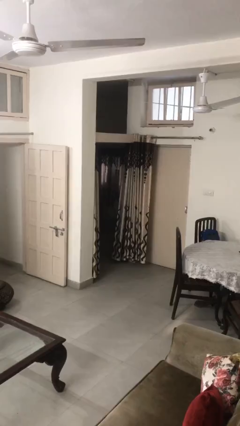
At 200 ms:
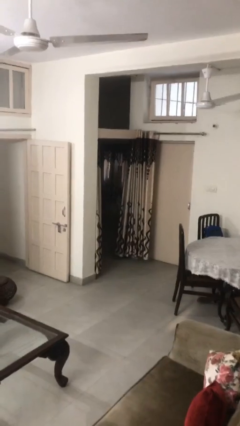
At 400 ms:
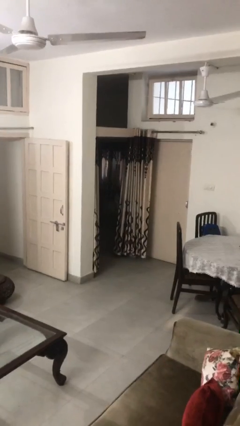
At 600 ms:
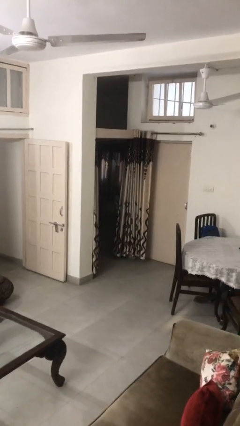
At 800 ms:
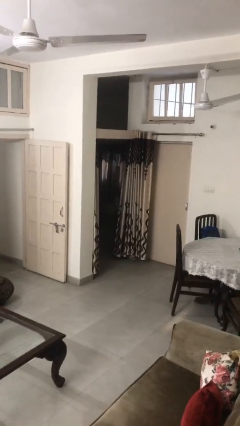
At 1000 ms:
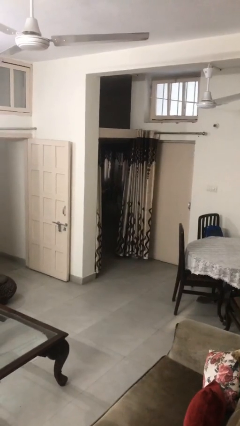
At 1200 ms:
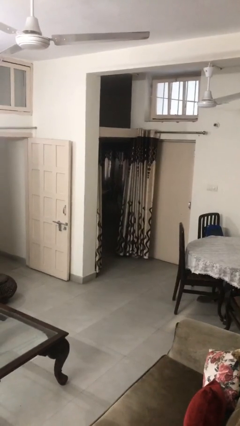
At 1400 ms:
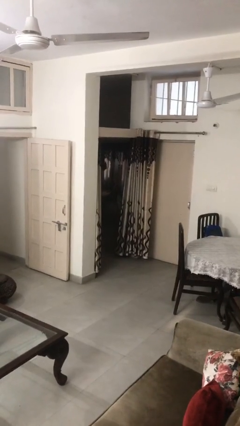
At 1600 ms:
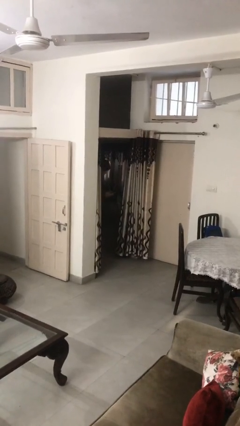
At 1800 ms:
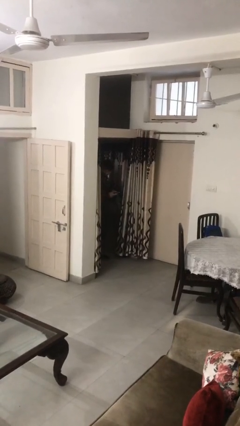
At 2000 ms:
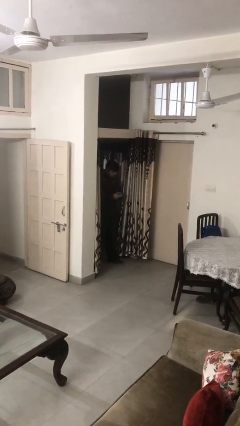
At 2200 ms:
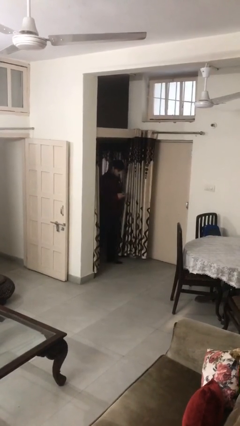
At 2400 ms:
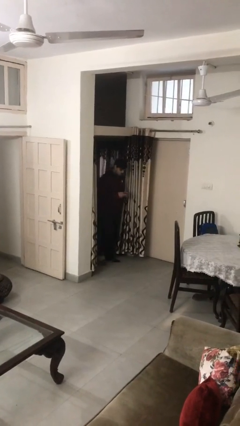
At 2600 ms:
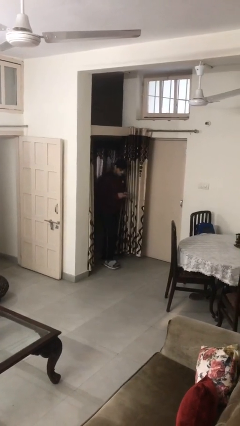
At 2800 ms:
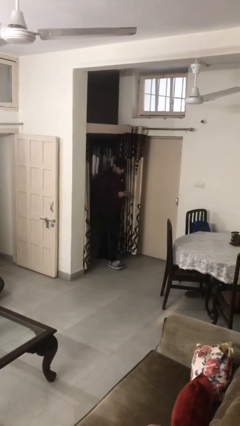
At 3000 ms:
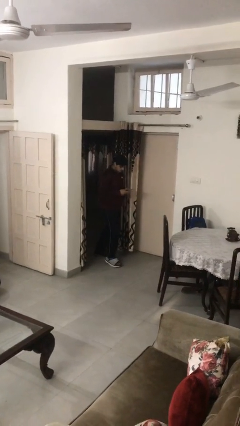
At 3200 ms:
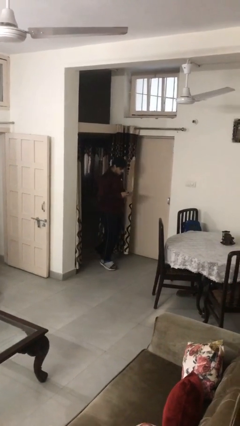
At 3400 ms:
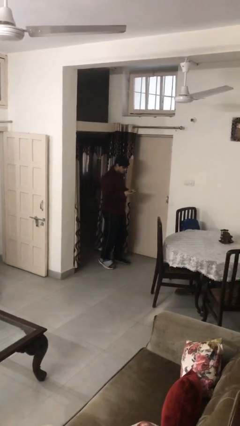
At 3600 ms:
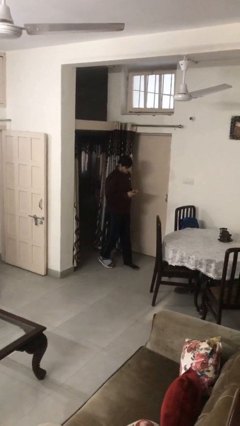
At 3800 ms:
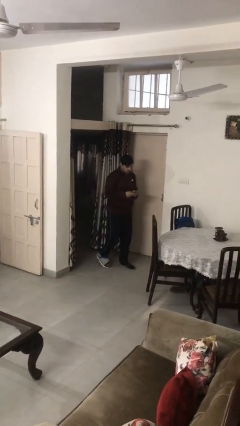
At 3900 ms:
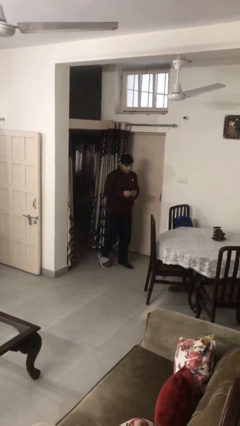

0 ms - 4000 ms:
person enters scene through structure

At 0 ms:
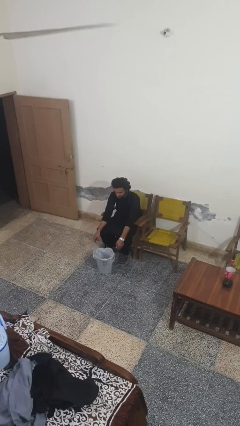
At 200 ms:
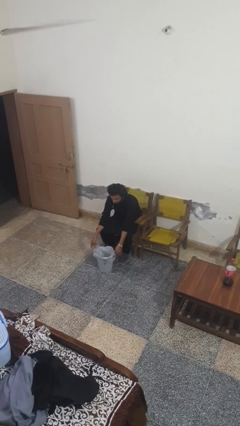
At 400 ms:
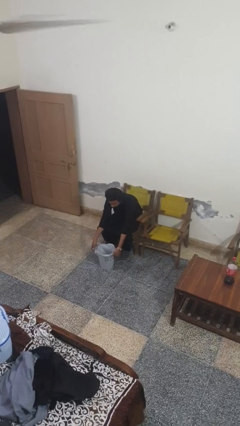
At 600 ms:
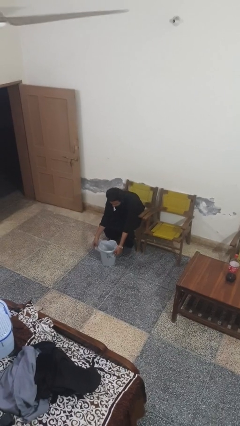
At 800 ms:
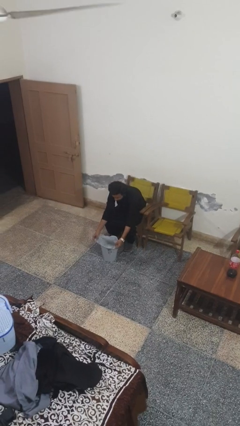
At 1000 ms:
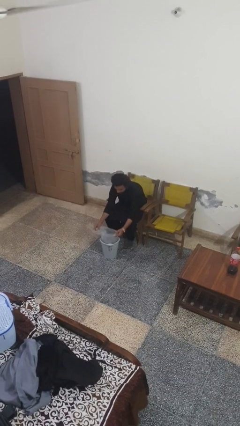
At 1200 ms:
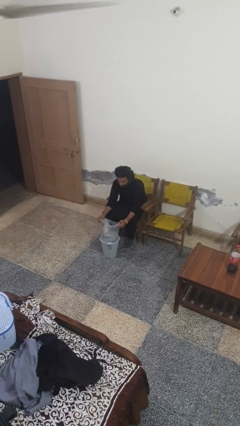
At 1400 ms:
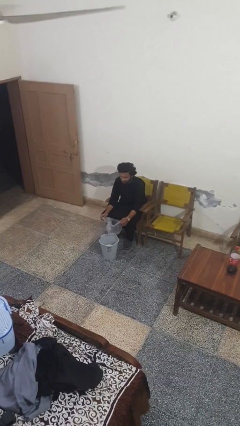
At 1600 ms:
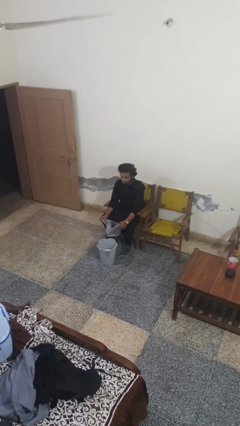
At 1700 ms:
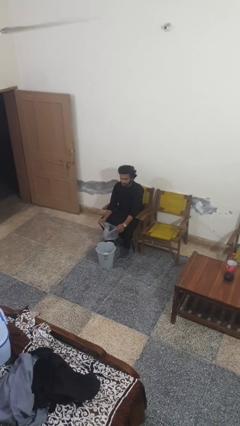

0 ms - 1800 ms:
person removes trashbag from trashcan

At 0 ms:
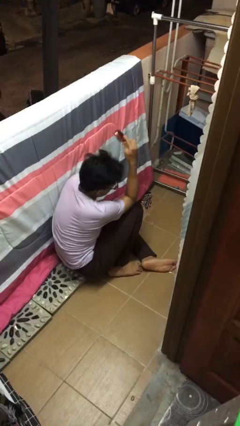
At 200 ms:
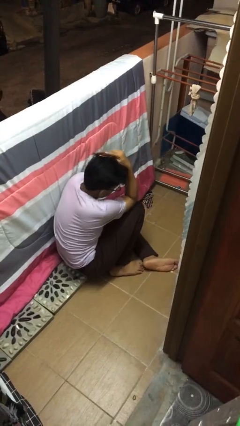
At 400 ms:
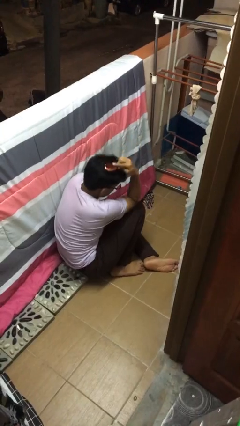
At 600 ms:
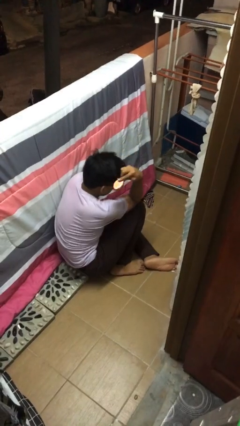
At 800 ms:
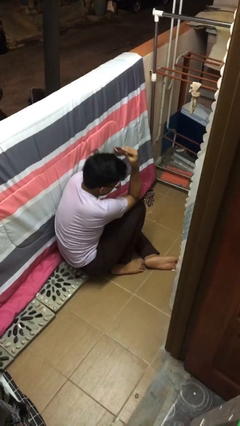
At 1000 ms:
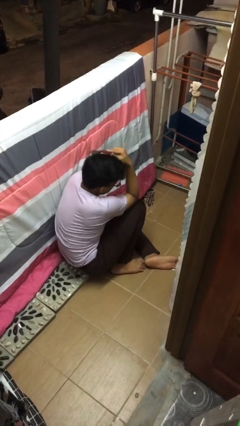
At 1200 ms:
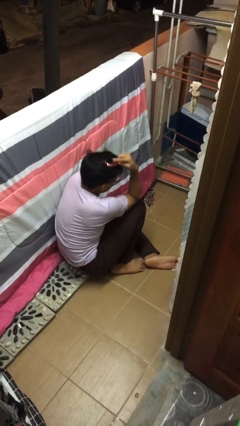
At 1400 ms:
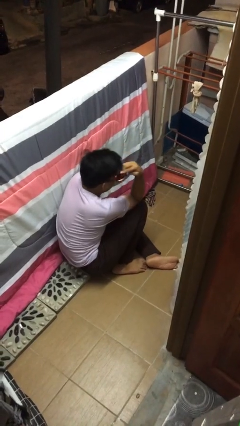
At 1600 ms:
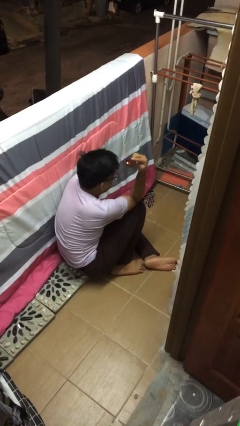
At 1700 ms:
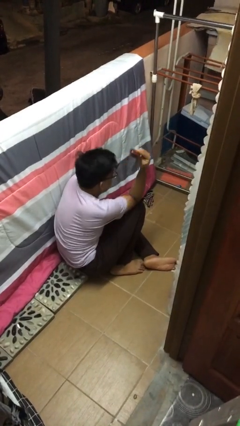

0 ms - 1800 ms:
person brushes hair

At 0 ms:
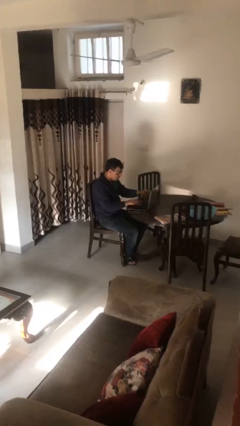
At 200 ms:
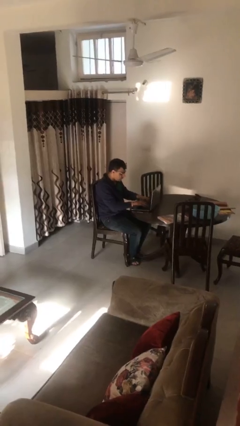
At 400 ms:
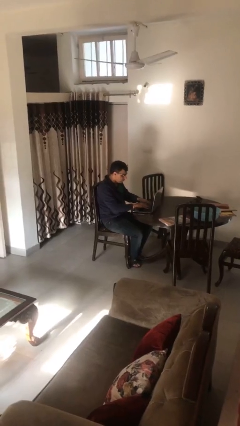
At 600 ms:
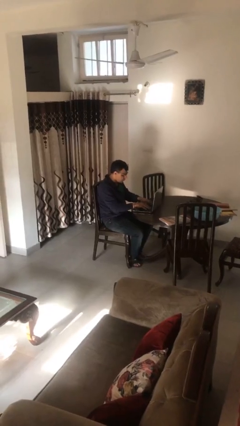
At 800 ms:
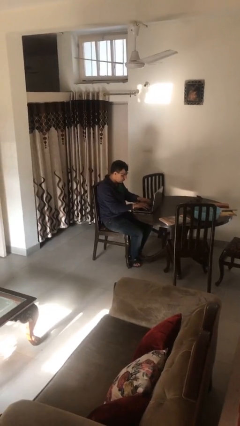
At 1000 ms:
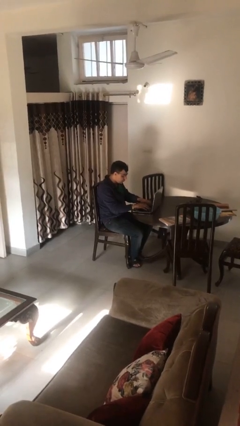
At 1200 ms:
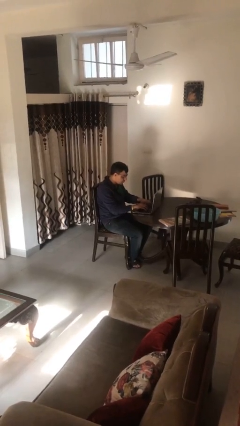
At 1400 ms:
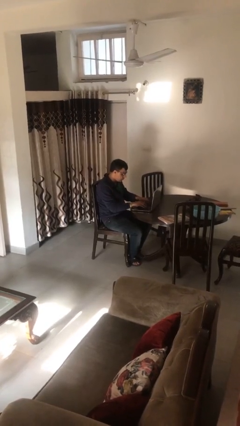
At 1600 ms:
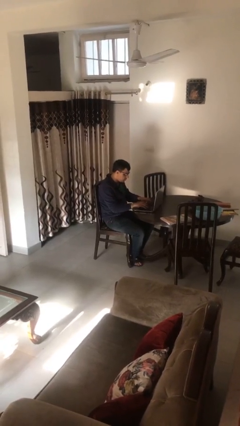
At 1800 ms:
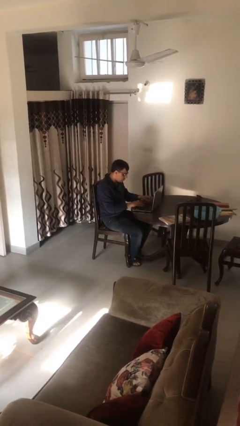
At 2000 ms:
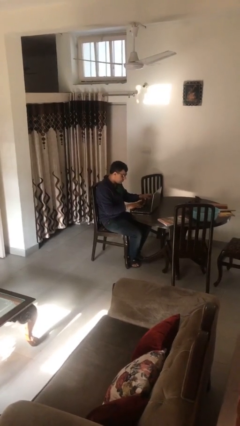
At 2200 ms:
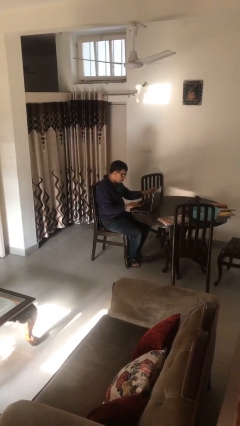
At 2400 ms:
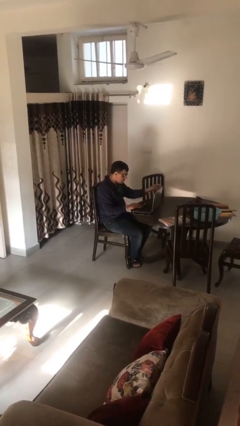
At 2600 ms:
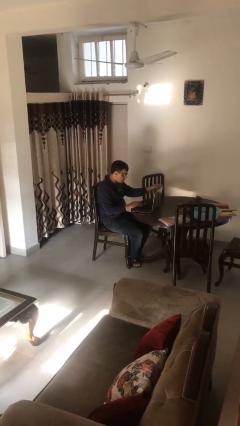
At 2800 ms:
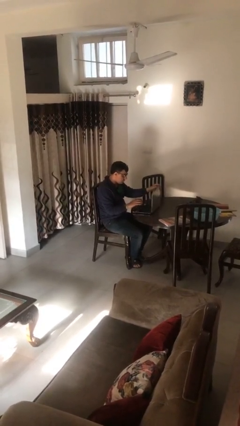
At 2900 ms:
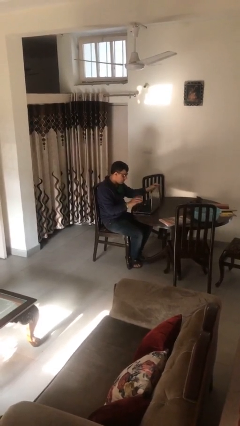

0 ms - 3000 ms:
person interacts with laptop

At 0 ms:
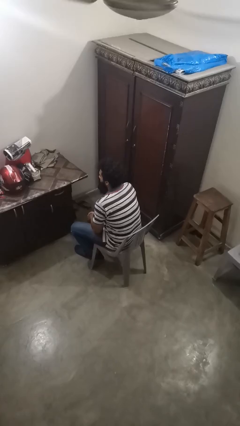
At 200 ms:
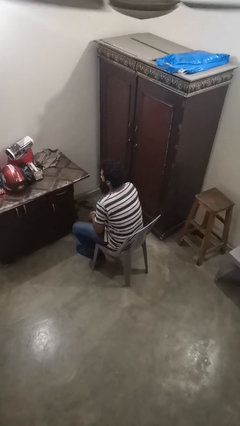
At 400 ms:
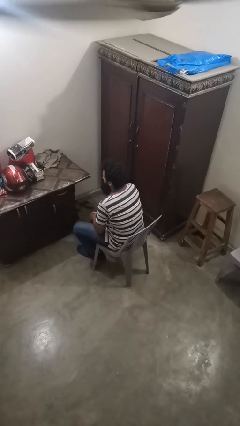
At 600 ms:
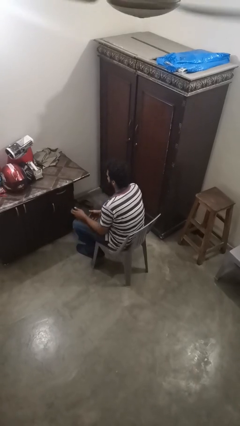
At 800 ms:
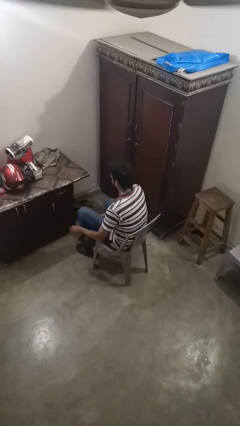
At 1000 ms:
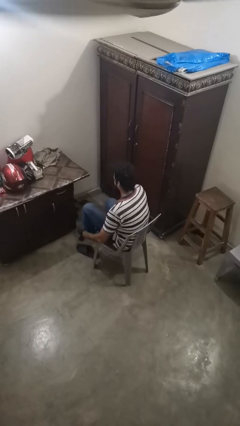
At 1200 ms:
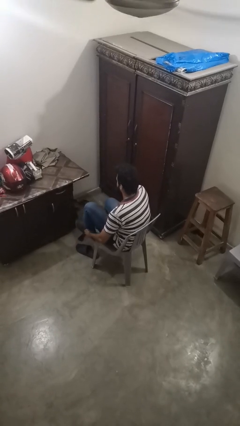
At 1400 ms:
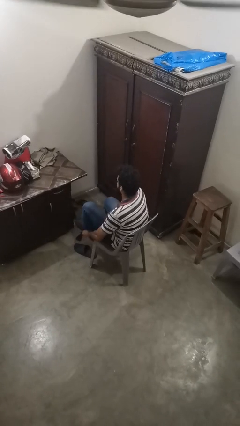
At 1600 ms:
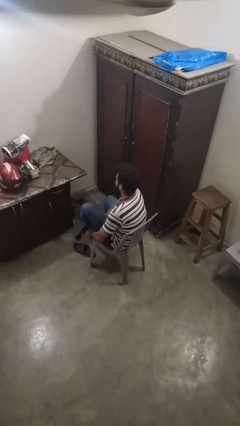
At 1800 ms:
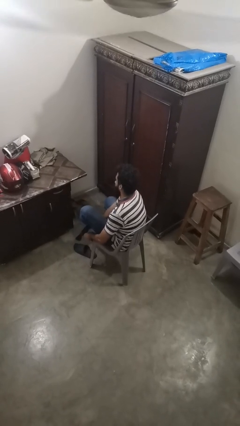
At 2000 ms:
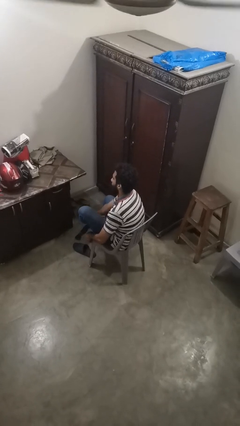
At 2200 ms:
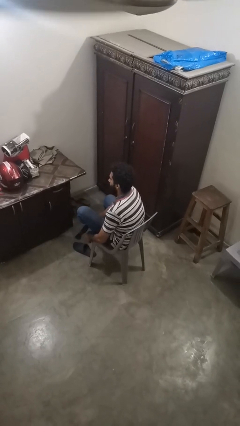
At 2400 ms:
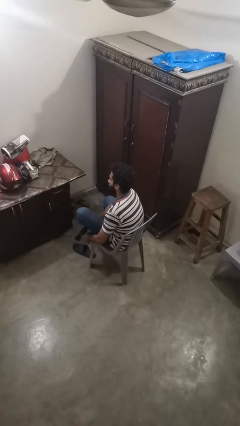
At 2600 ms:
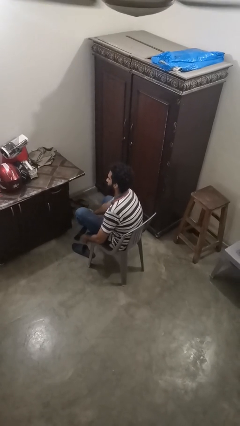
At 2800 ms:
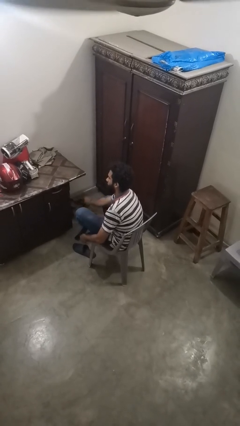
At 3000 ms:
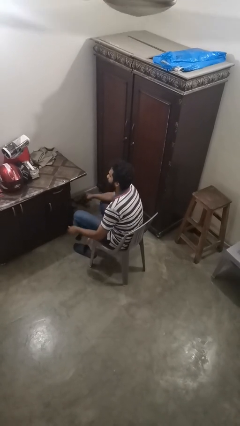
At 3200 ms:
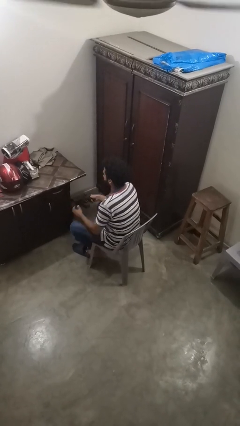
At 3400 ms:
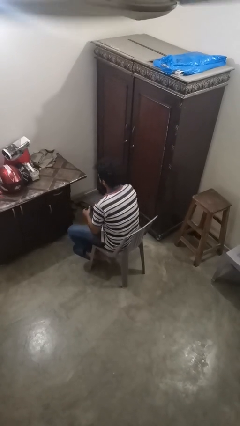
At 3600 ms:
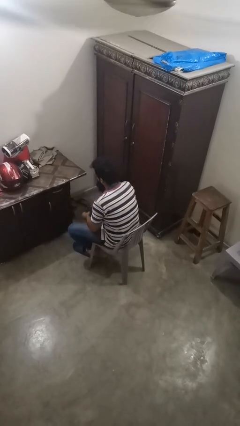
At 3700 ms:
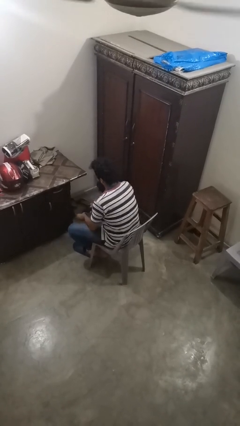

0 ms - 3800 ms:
person takes off socks

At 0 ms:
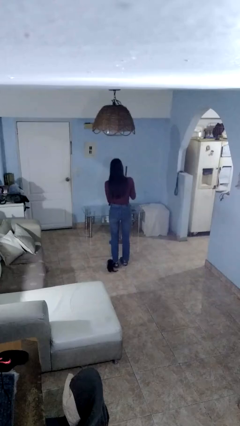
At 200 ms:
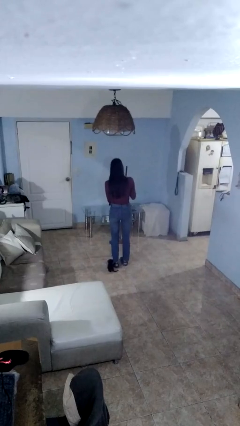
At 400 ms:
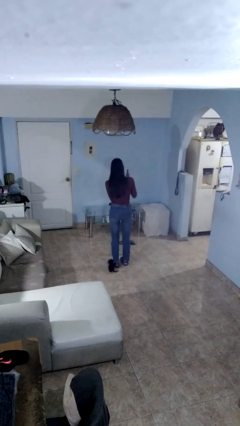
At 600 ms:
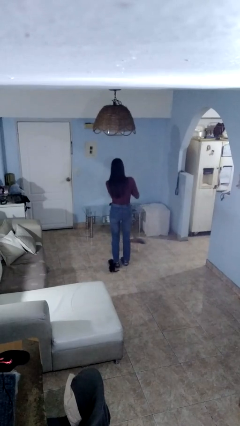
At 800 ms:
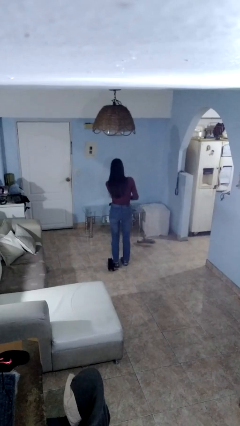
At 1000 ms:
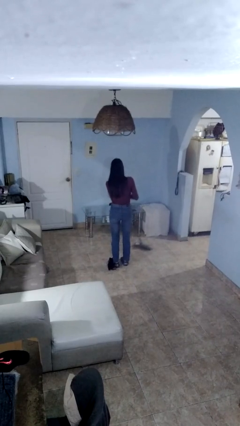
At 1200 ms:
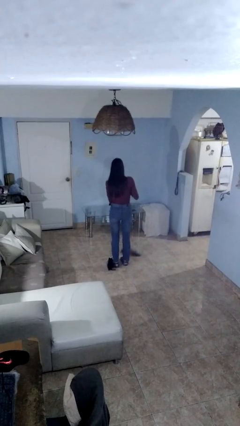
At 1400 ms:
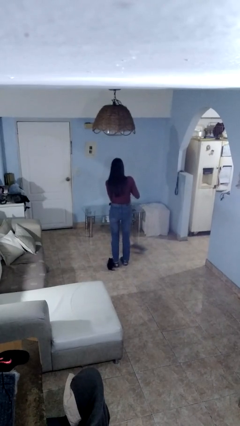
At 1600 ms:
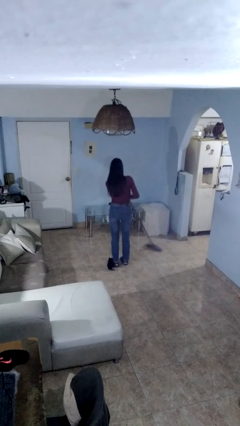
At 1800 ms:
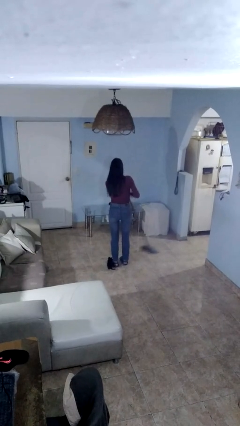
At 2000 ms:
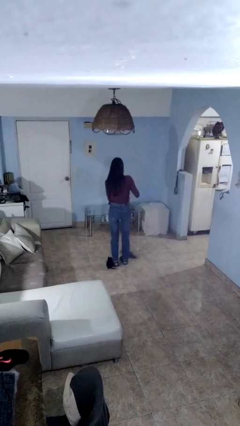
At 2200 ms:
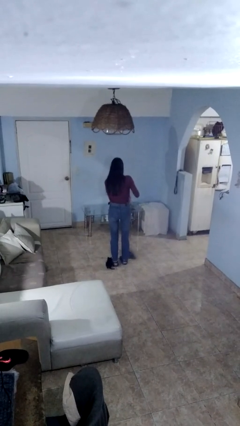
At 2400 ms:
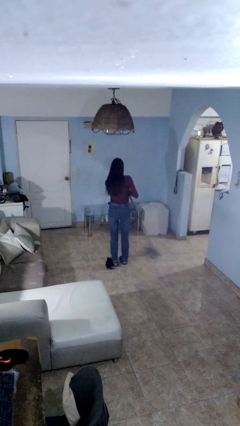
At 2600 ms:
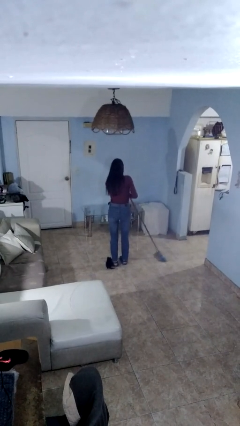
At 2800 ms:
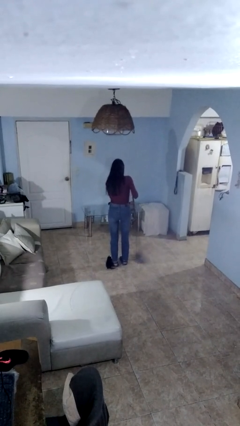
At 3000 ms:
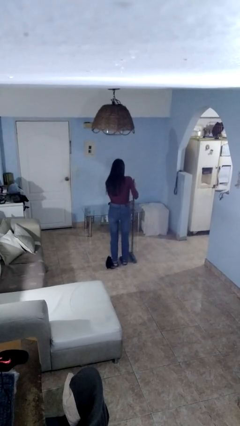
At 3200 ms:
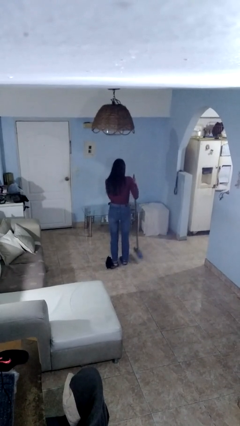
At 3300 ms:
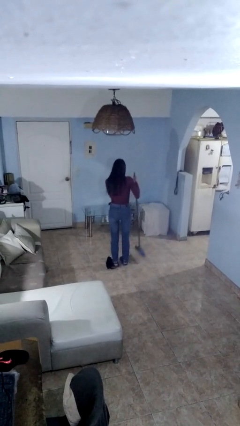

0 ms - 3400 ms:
person sweeps floor
